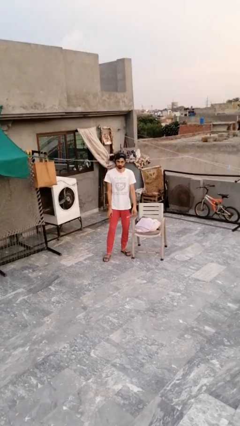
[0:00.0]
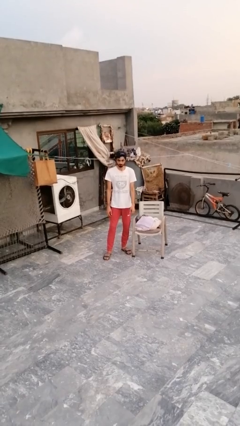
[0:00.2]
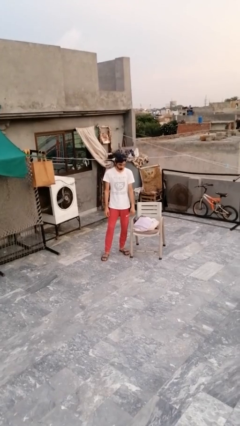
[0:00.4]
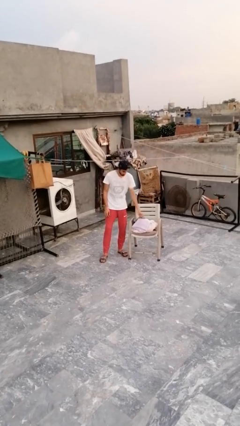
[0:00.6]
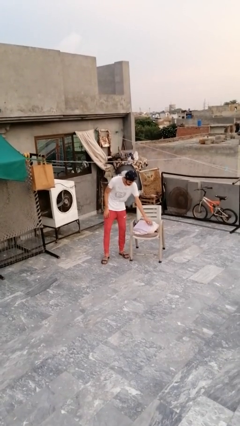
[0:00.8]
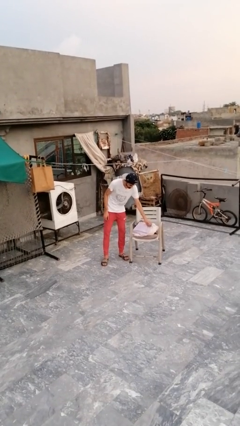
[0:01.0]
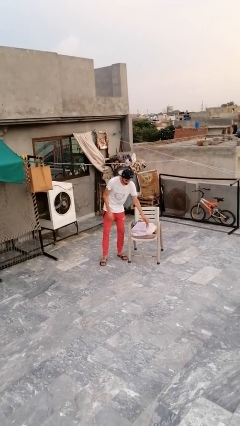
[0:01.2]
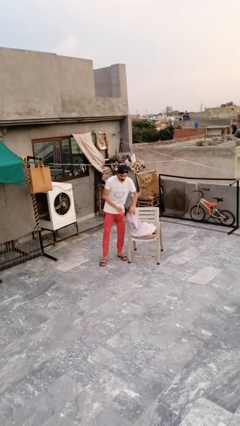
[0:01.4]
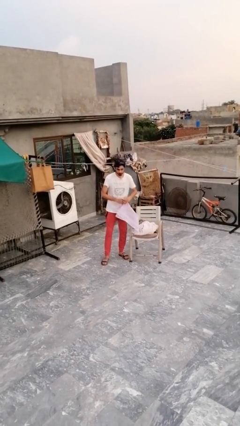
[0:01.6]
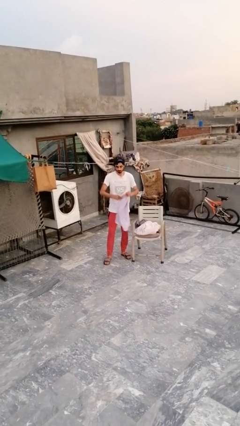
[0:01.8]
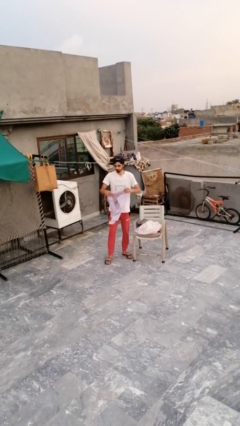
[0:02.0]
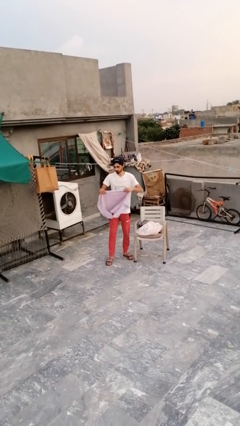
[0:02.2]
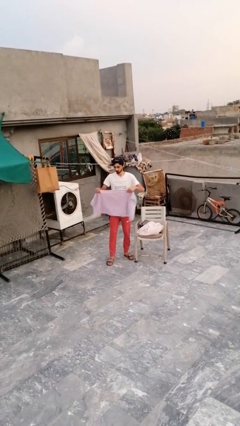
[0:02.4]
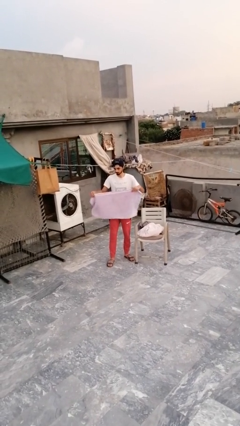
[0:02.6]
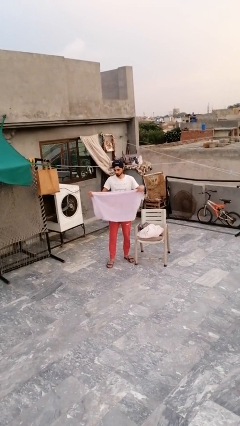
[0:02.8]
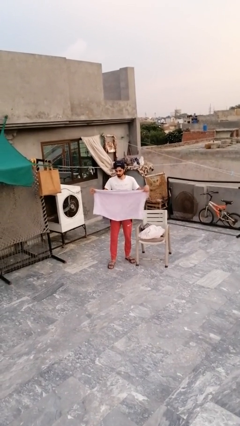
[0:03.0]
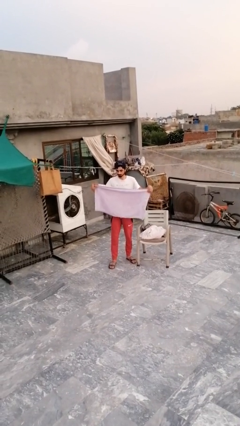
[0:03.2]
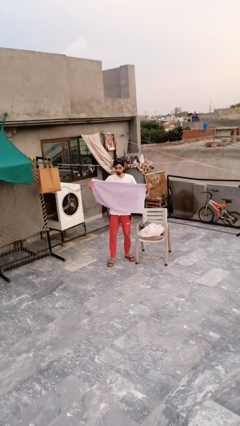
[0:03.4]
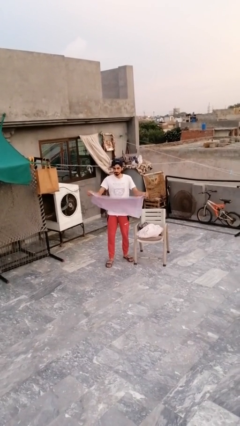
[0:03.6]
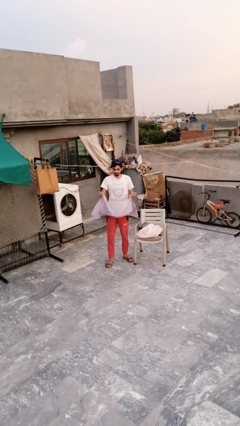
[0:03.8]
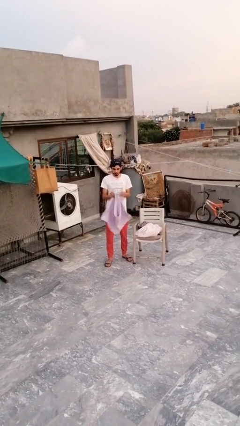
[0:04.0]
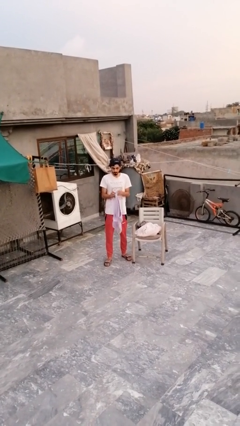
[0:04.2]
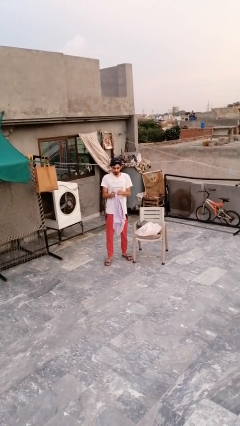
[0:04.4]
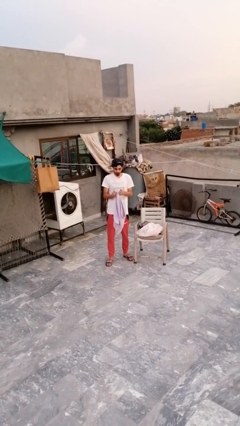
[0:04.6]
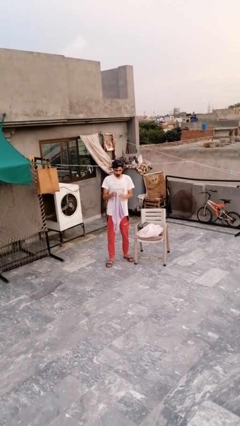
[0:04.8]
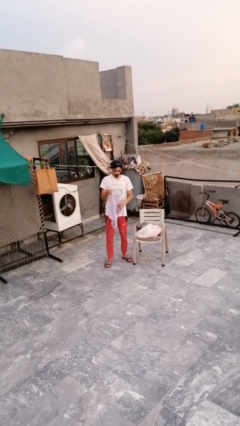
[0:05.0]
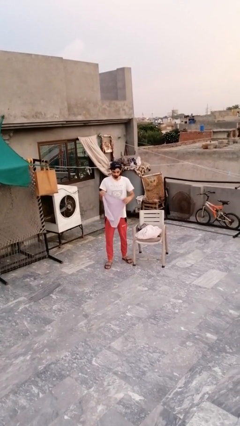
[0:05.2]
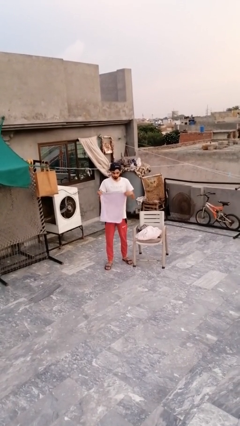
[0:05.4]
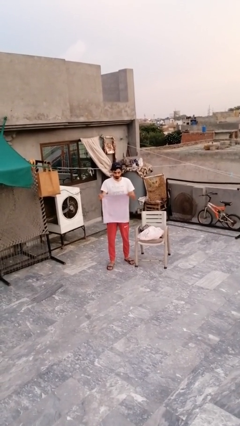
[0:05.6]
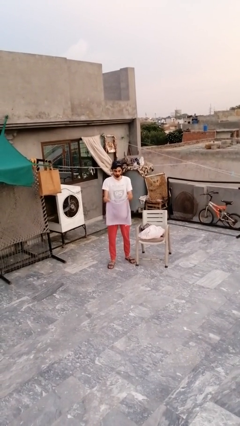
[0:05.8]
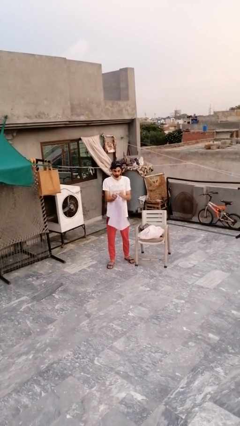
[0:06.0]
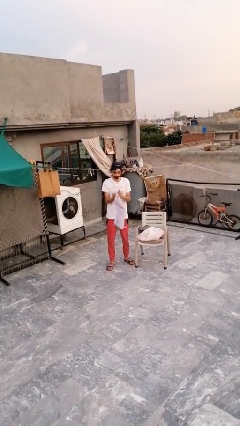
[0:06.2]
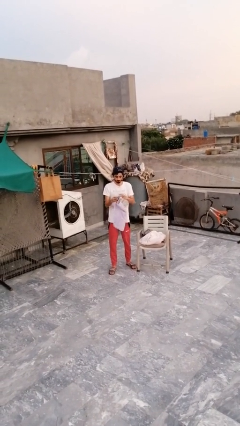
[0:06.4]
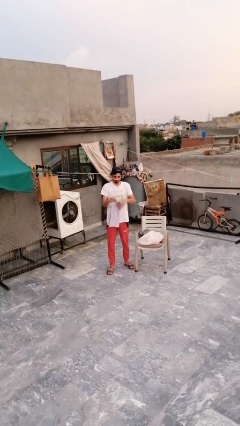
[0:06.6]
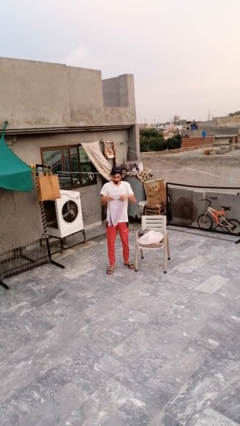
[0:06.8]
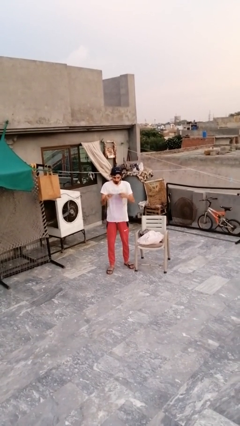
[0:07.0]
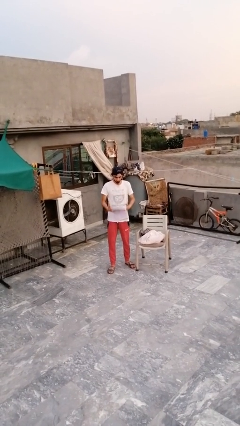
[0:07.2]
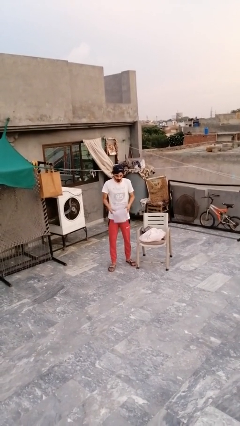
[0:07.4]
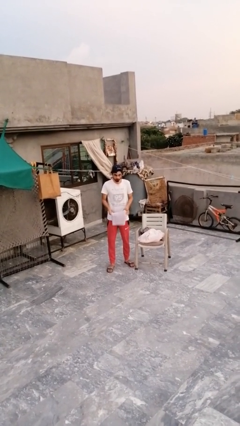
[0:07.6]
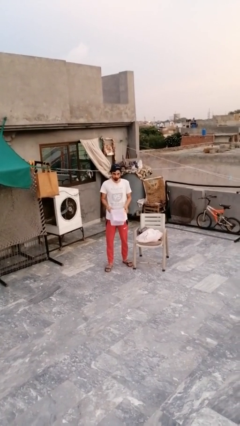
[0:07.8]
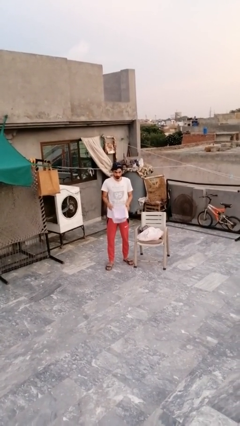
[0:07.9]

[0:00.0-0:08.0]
person folds towel

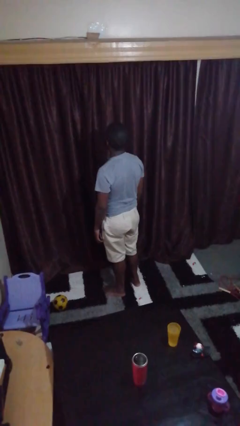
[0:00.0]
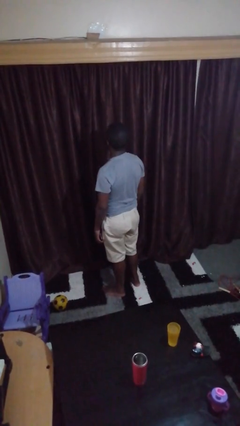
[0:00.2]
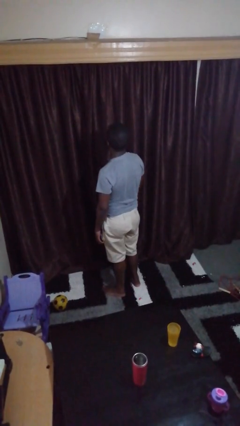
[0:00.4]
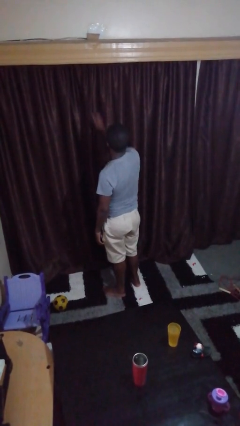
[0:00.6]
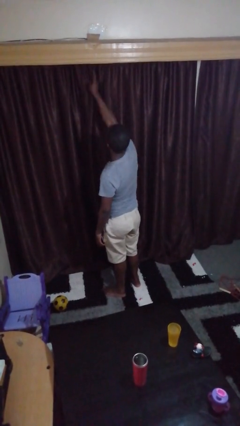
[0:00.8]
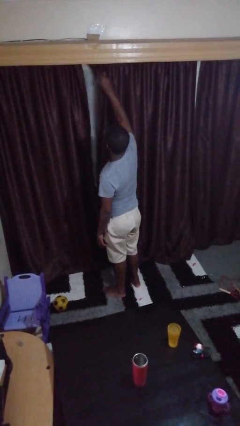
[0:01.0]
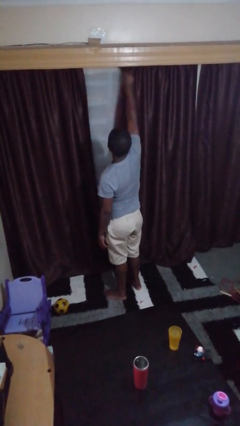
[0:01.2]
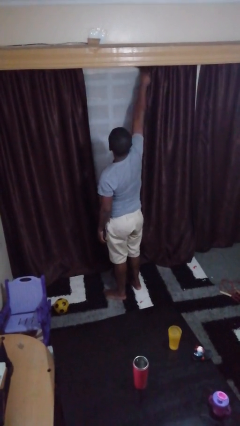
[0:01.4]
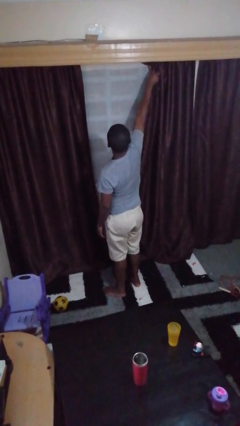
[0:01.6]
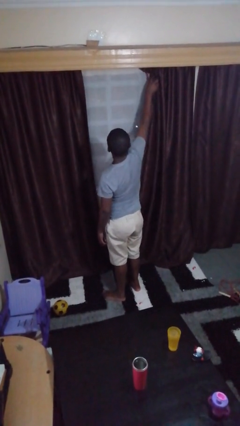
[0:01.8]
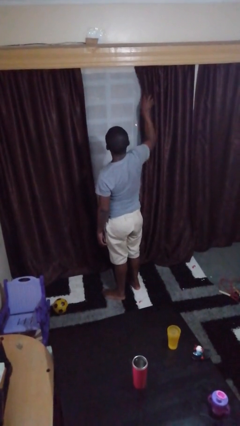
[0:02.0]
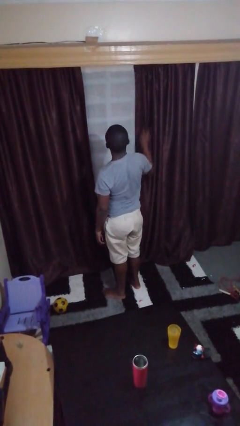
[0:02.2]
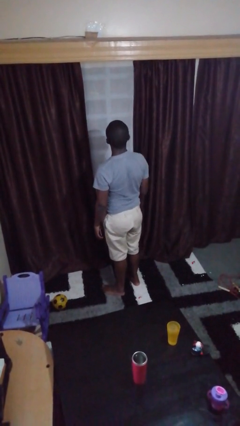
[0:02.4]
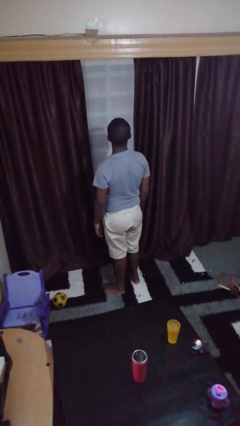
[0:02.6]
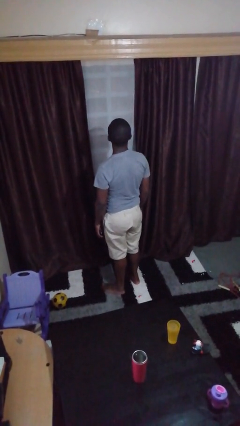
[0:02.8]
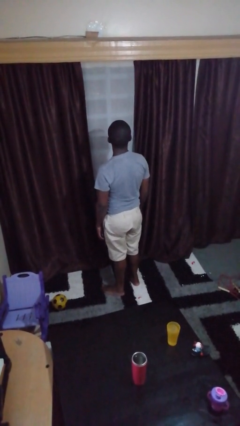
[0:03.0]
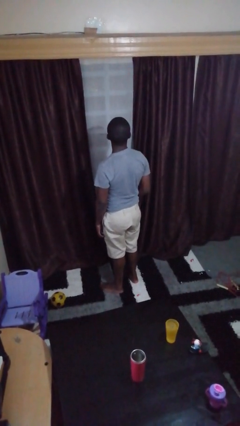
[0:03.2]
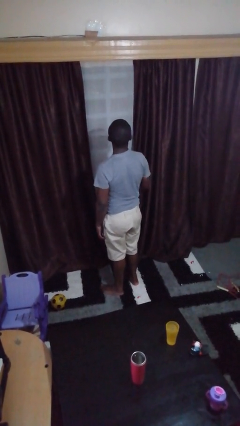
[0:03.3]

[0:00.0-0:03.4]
person opens curtains

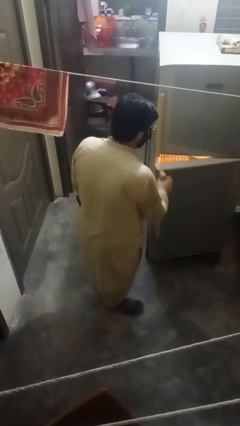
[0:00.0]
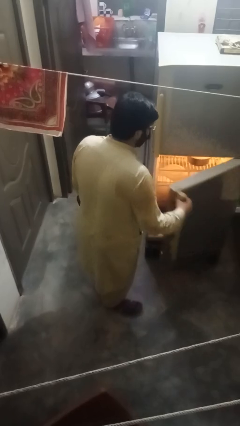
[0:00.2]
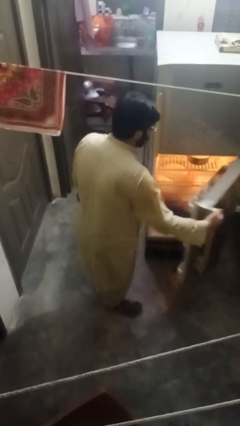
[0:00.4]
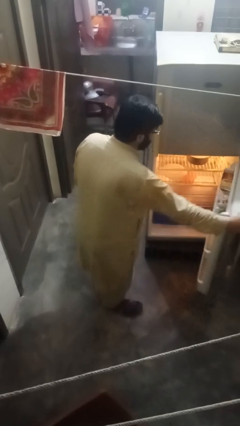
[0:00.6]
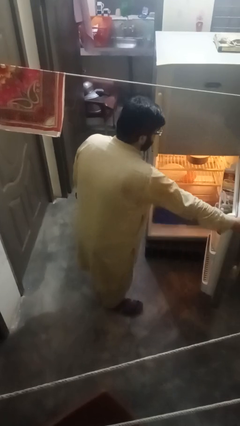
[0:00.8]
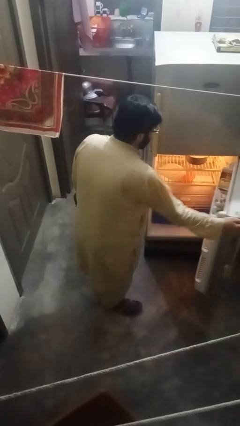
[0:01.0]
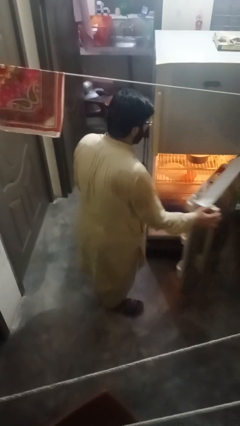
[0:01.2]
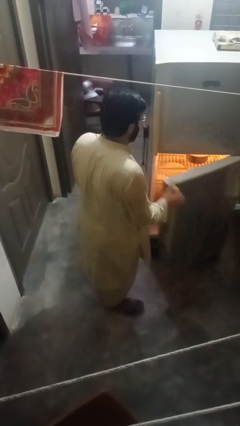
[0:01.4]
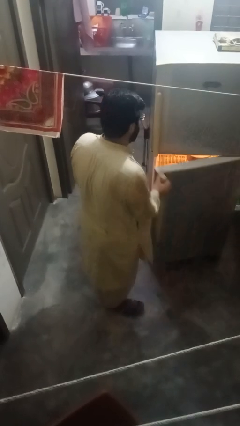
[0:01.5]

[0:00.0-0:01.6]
person opens refrigerator

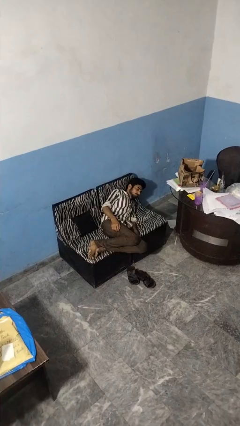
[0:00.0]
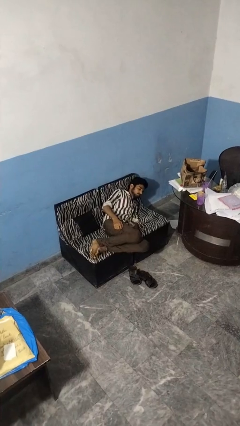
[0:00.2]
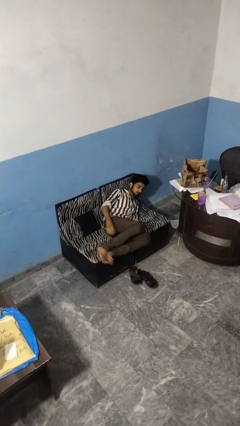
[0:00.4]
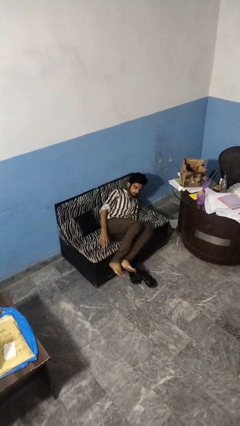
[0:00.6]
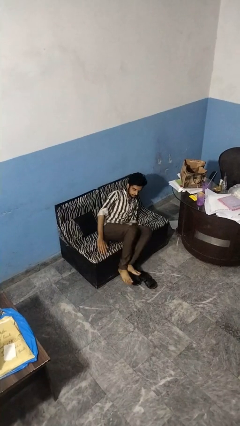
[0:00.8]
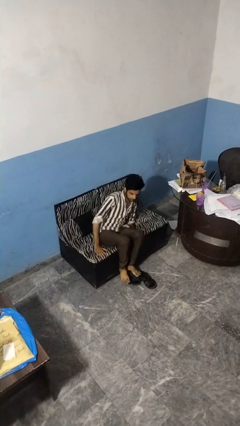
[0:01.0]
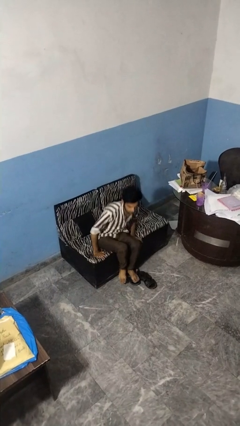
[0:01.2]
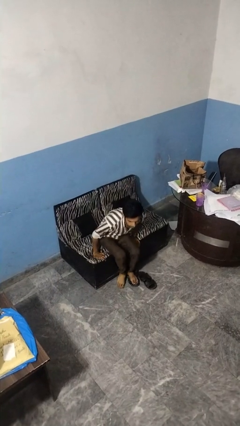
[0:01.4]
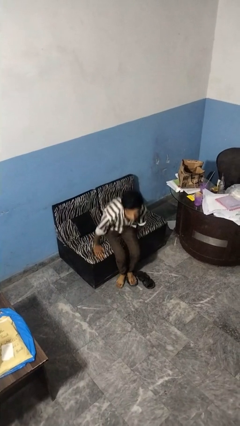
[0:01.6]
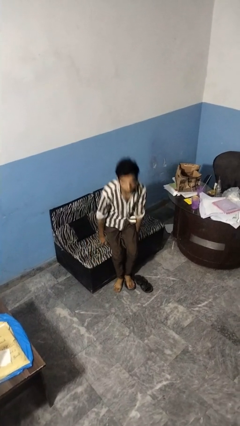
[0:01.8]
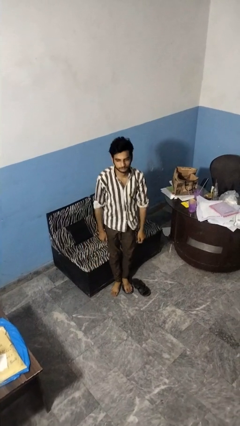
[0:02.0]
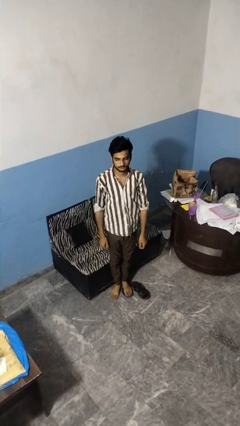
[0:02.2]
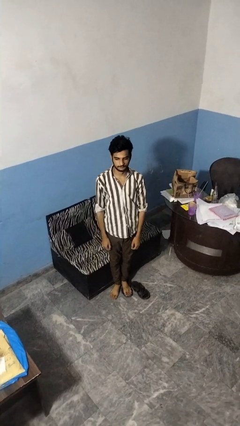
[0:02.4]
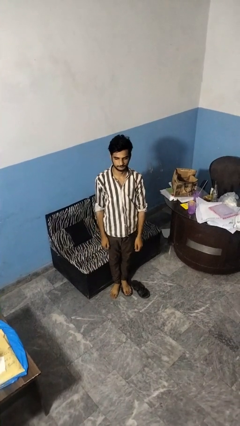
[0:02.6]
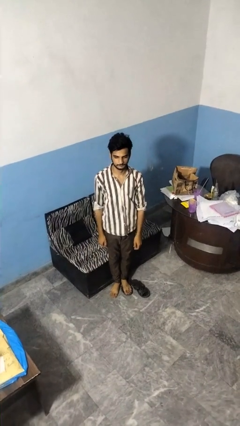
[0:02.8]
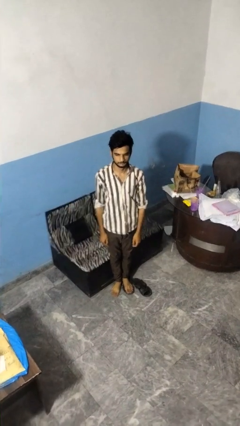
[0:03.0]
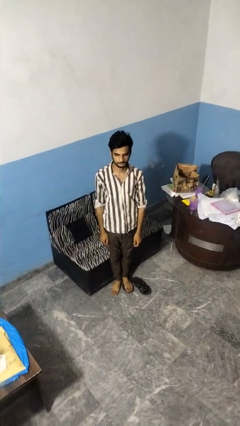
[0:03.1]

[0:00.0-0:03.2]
person stands up

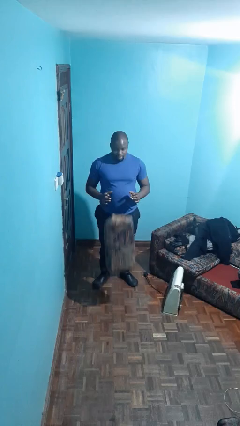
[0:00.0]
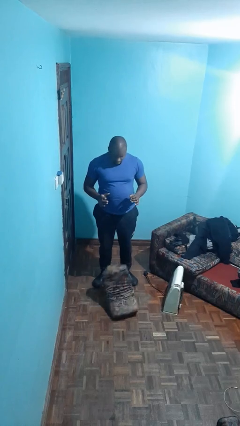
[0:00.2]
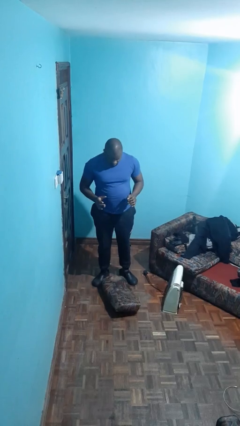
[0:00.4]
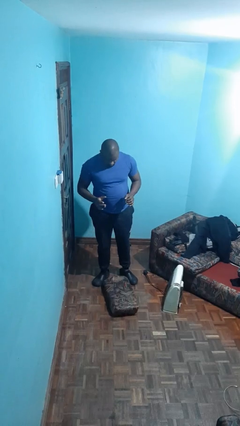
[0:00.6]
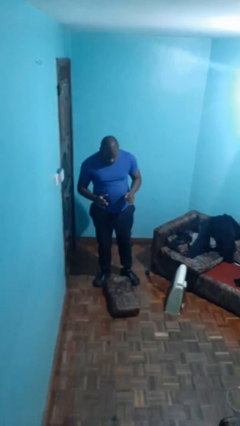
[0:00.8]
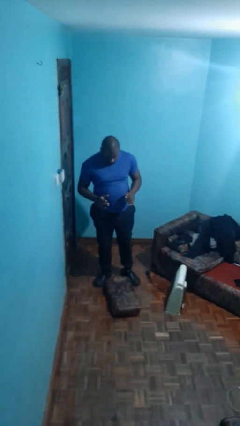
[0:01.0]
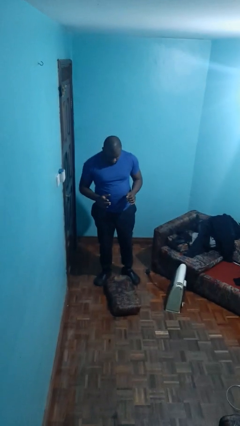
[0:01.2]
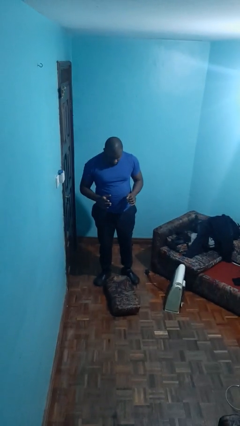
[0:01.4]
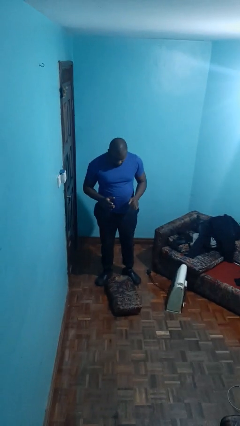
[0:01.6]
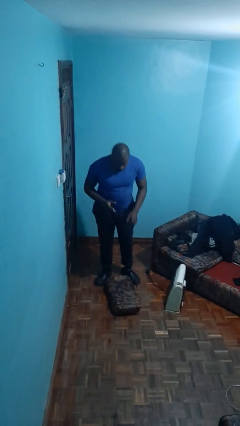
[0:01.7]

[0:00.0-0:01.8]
person drops object

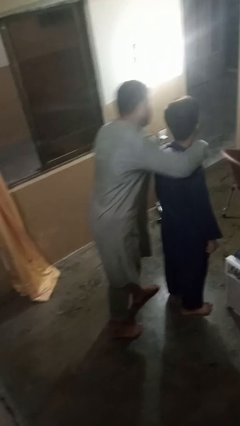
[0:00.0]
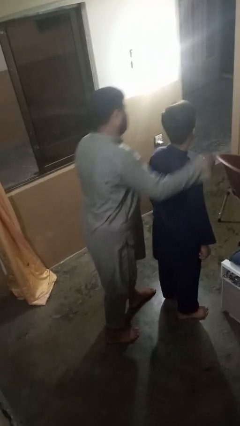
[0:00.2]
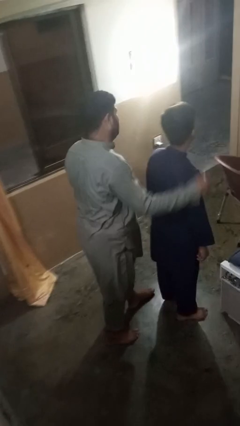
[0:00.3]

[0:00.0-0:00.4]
person hugs person from behind
